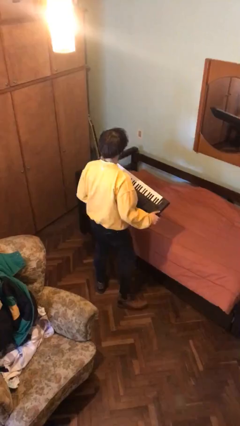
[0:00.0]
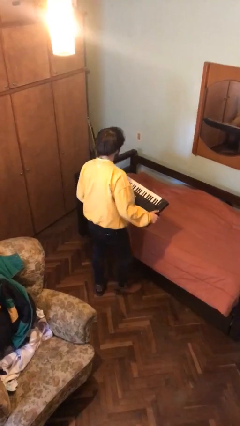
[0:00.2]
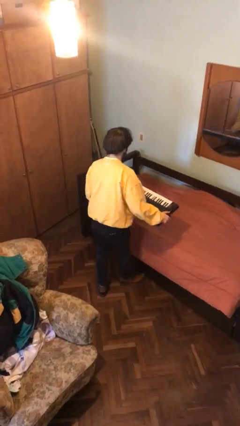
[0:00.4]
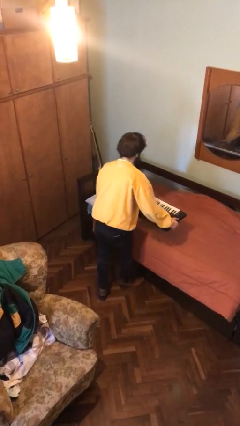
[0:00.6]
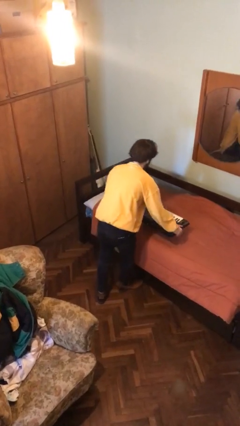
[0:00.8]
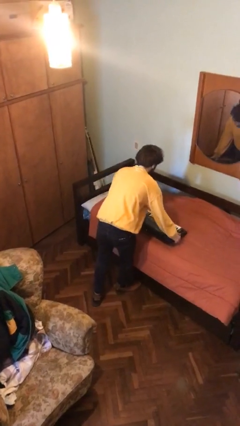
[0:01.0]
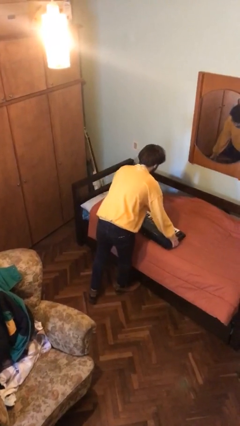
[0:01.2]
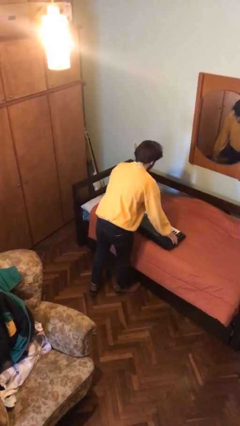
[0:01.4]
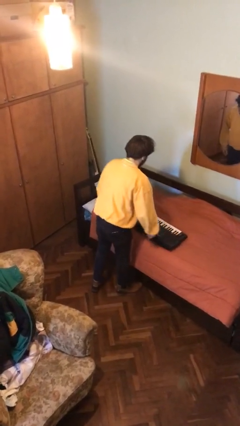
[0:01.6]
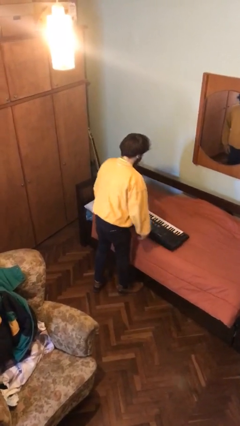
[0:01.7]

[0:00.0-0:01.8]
person puts down object on bed

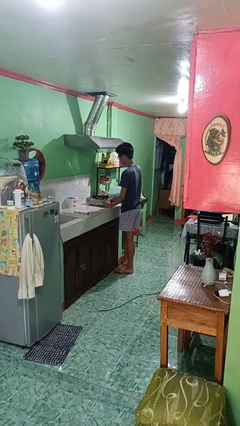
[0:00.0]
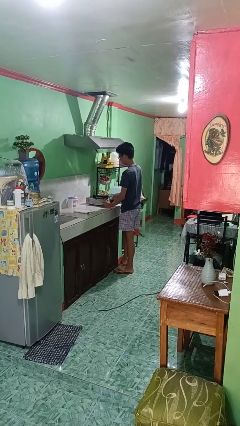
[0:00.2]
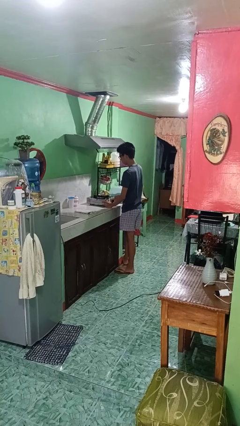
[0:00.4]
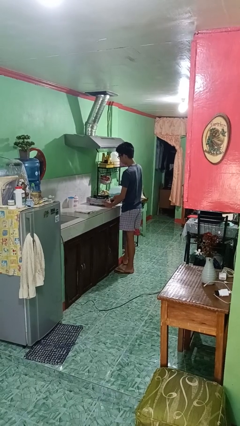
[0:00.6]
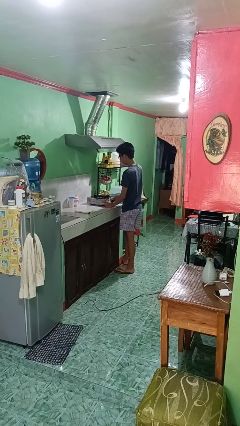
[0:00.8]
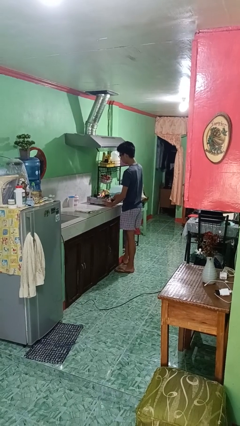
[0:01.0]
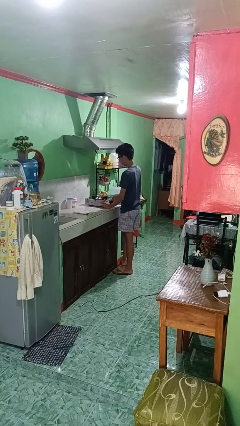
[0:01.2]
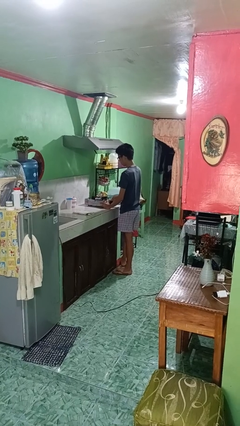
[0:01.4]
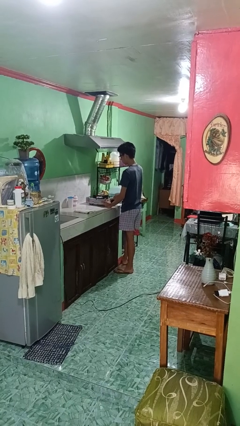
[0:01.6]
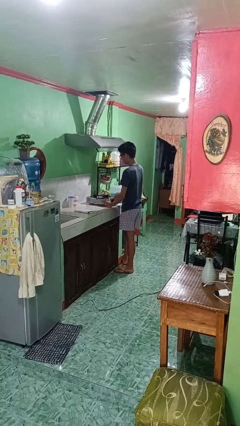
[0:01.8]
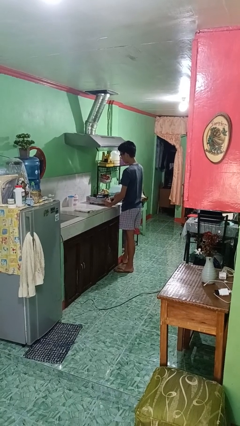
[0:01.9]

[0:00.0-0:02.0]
person turns on stovetop

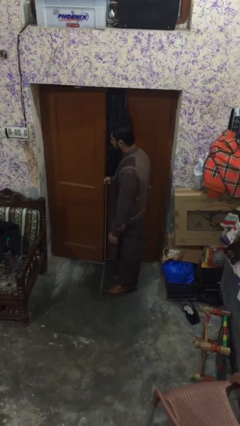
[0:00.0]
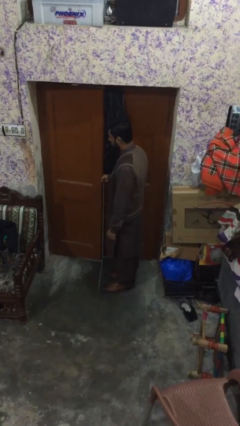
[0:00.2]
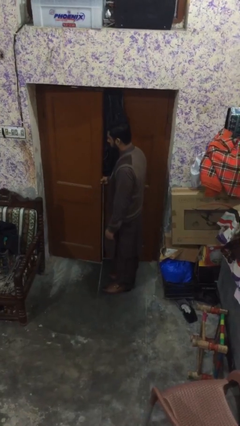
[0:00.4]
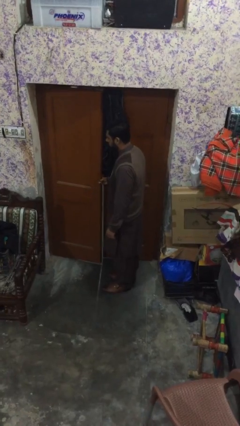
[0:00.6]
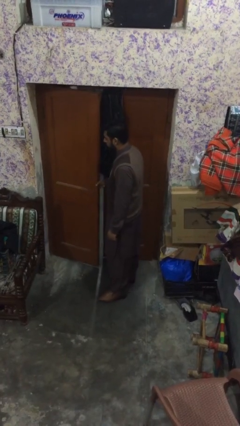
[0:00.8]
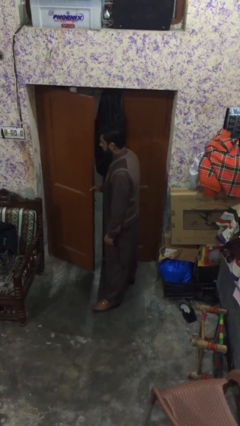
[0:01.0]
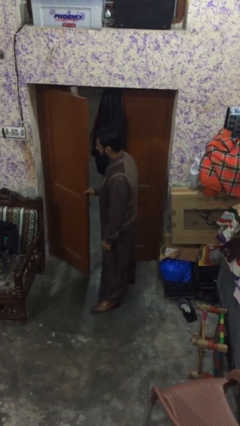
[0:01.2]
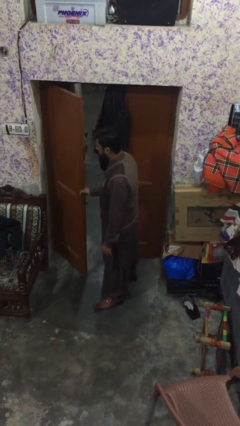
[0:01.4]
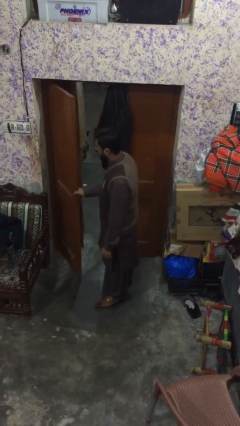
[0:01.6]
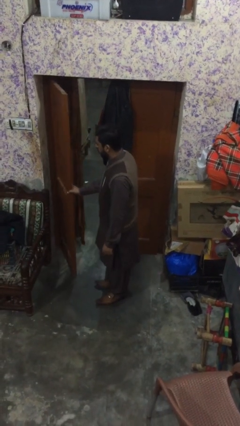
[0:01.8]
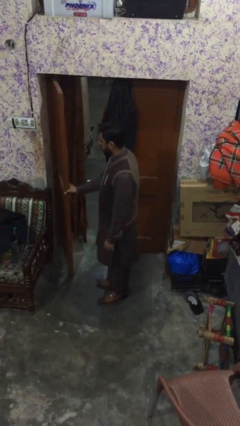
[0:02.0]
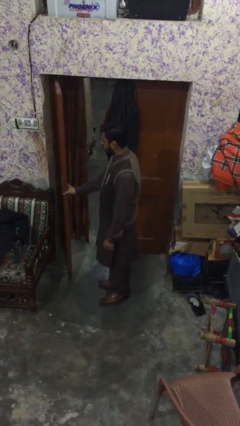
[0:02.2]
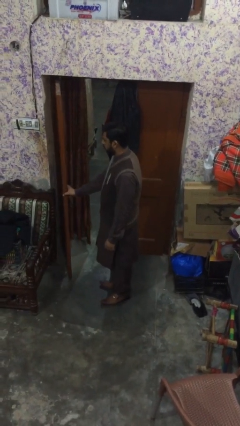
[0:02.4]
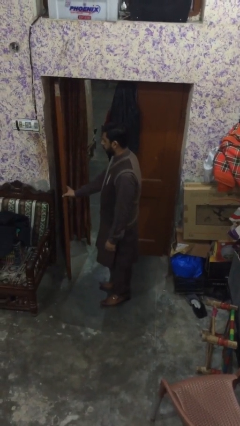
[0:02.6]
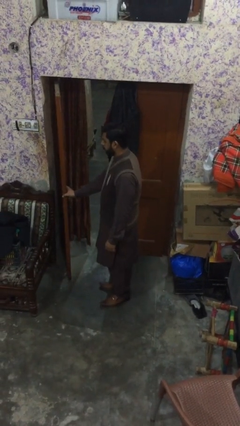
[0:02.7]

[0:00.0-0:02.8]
person opens facility door

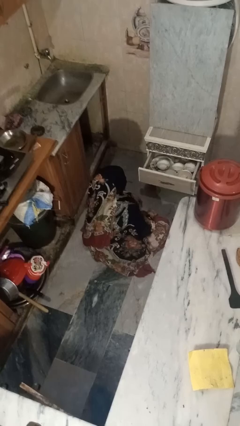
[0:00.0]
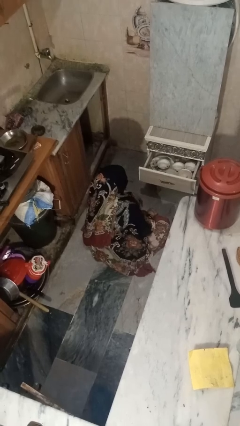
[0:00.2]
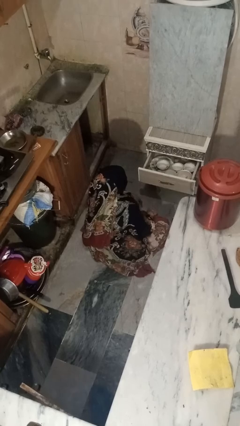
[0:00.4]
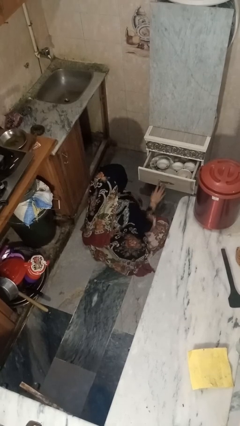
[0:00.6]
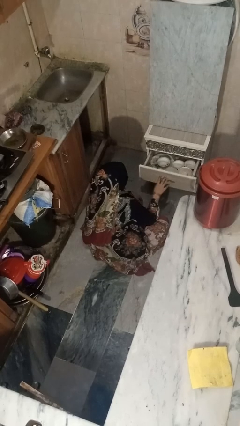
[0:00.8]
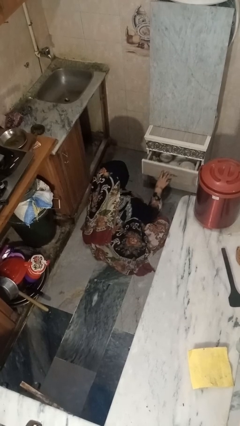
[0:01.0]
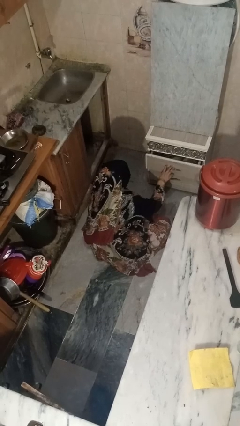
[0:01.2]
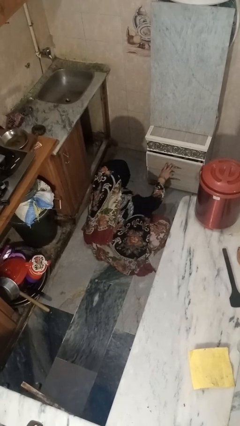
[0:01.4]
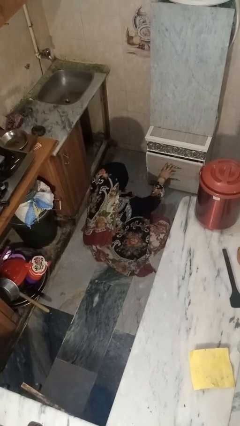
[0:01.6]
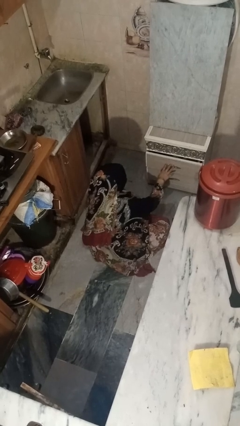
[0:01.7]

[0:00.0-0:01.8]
person closes kitchen drawer

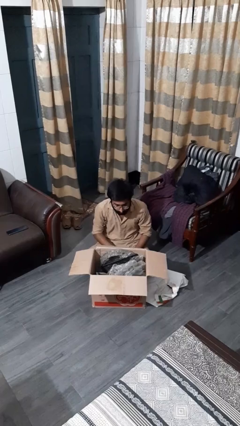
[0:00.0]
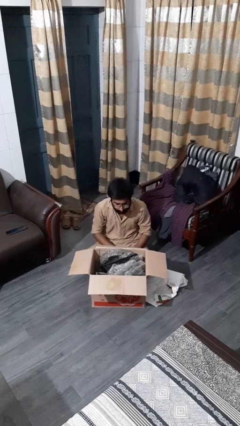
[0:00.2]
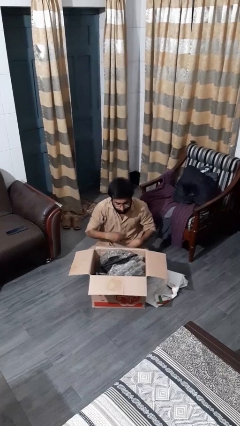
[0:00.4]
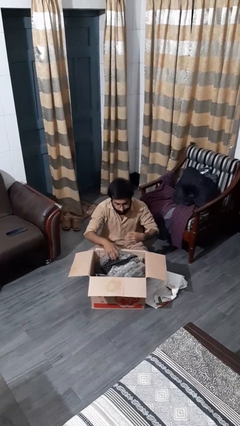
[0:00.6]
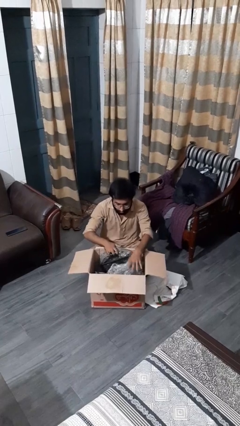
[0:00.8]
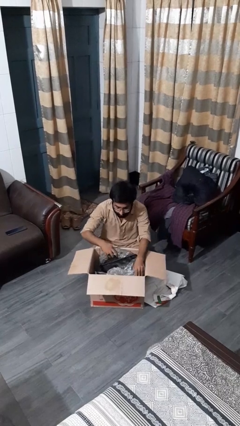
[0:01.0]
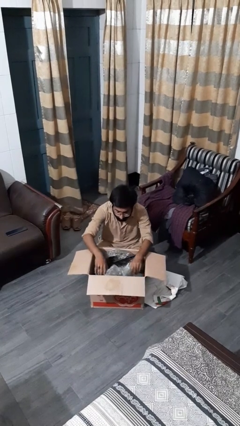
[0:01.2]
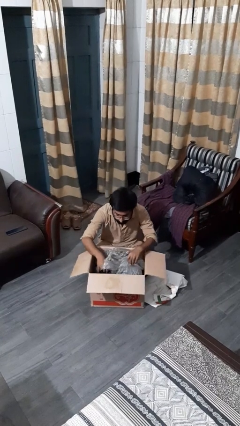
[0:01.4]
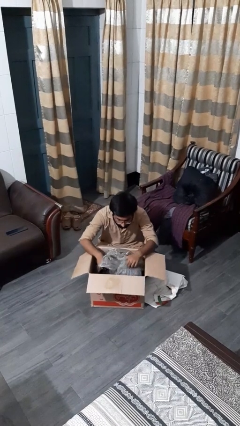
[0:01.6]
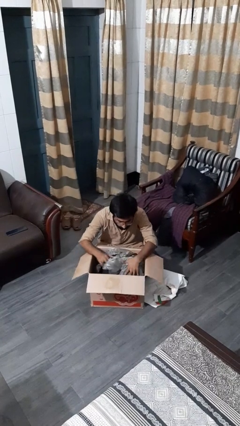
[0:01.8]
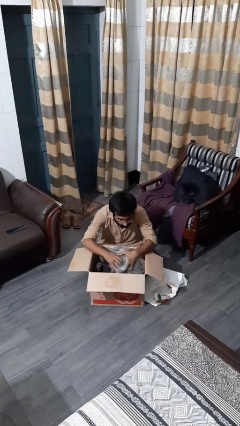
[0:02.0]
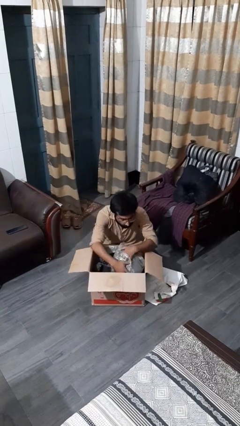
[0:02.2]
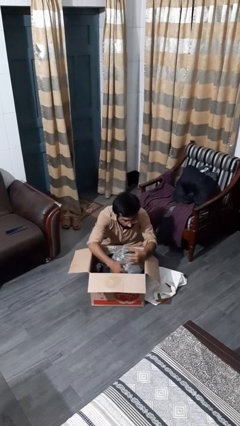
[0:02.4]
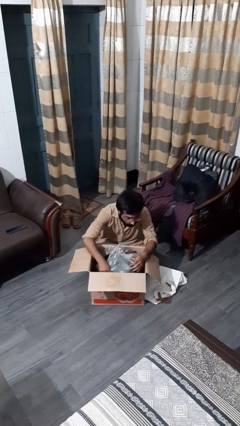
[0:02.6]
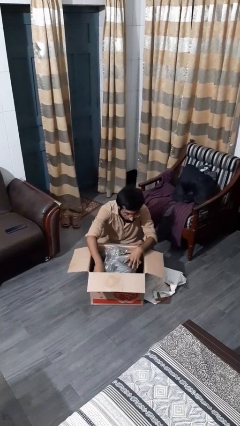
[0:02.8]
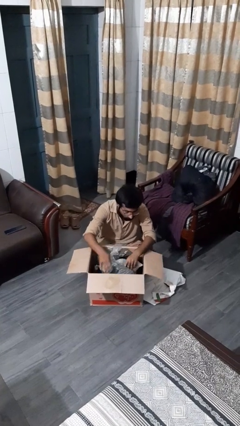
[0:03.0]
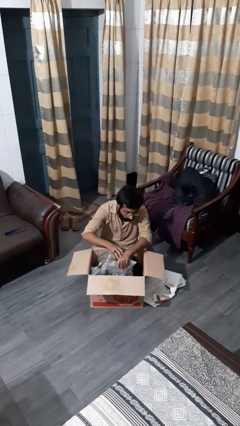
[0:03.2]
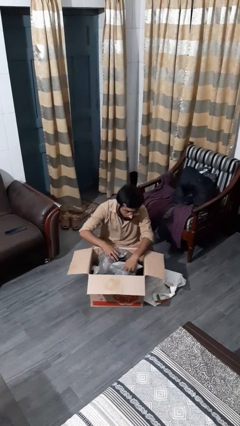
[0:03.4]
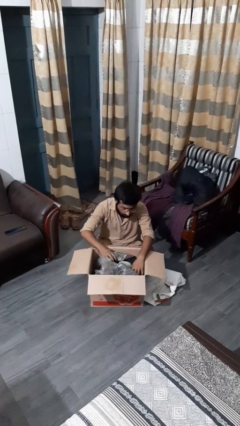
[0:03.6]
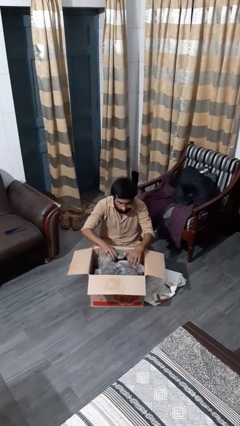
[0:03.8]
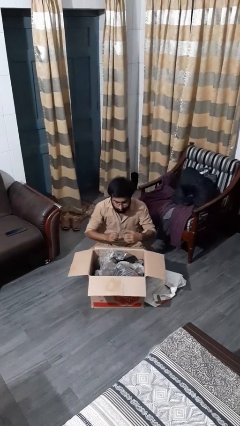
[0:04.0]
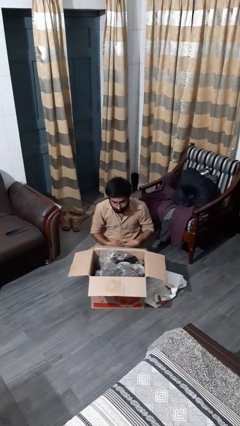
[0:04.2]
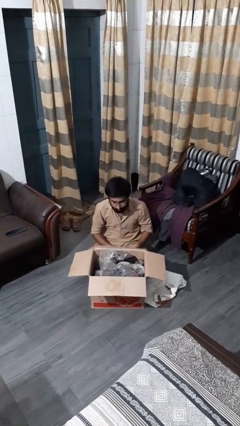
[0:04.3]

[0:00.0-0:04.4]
person searches in box

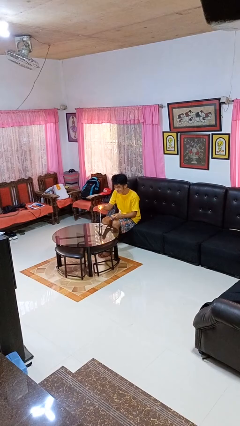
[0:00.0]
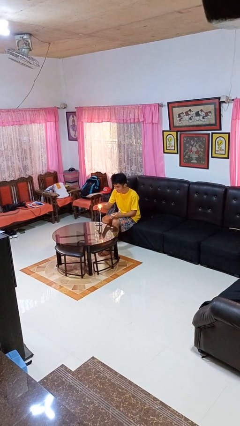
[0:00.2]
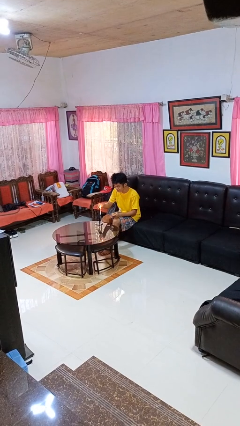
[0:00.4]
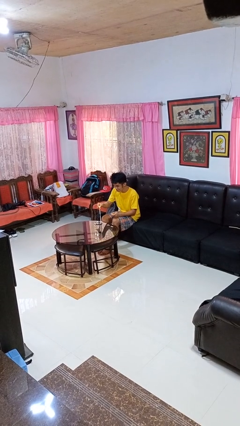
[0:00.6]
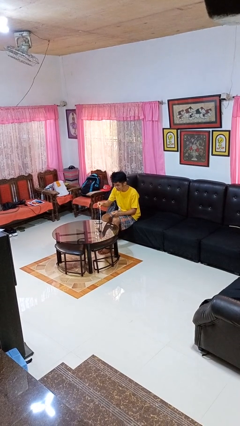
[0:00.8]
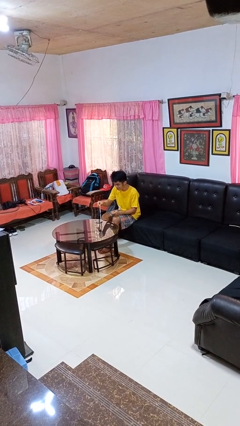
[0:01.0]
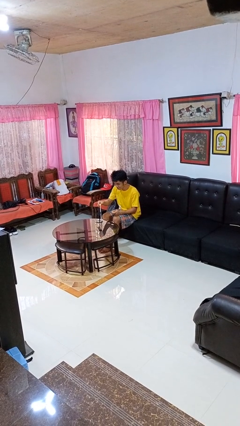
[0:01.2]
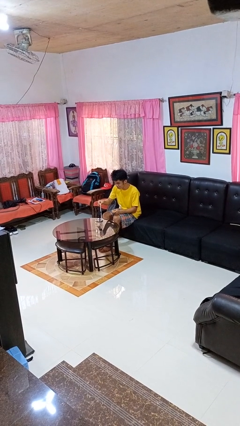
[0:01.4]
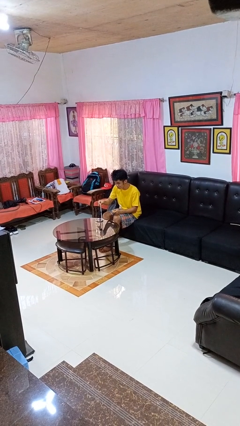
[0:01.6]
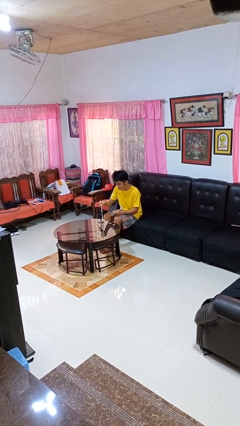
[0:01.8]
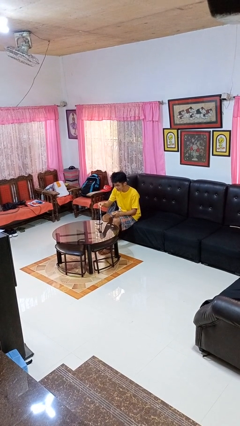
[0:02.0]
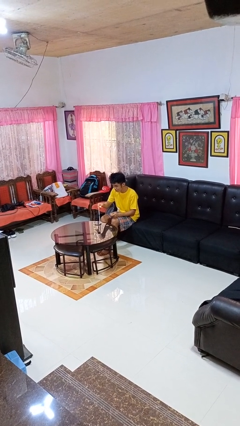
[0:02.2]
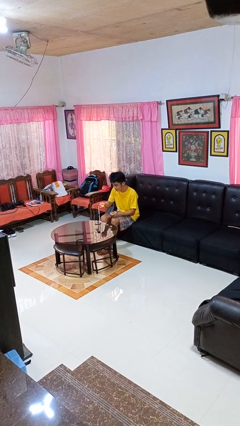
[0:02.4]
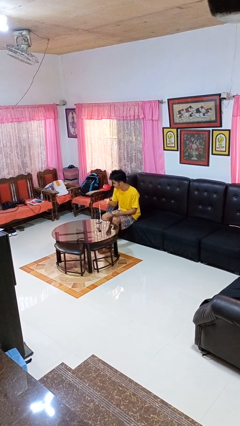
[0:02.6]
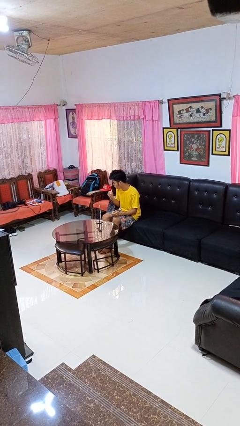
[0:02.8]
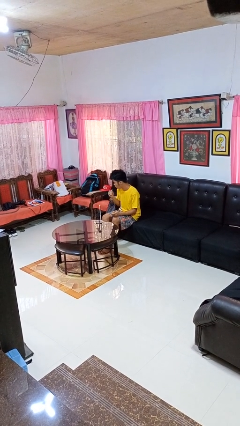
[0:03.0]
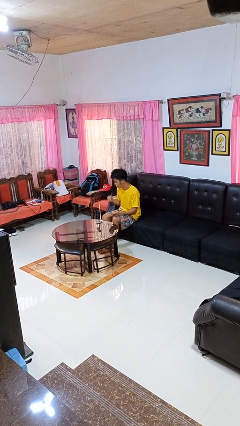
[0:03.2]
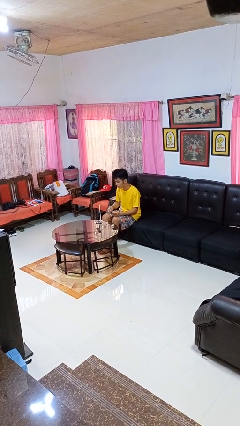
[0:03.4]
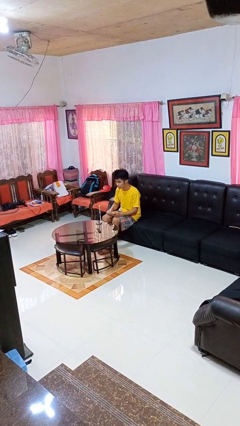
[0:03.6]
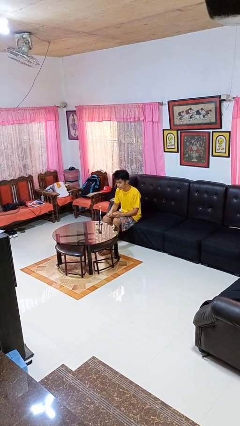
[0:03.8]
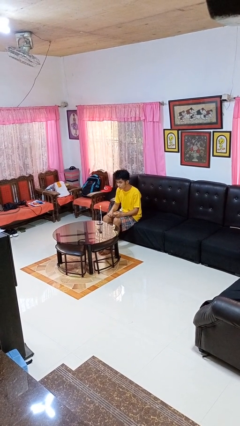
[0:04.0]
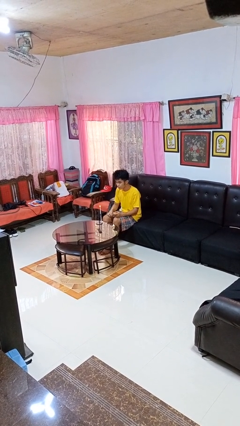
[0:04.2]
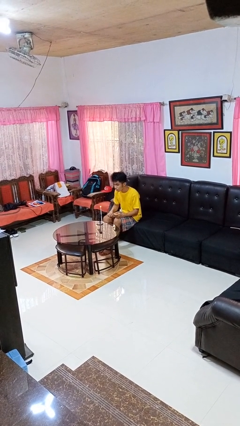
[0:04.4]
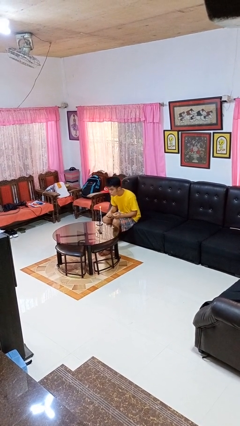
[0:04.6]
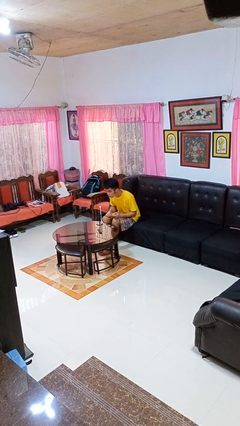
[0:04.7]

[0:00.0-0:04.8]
person lights candle

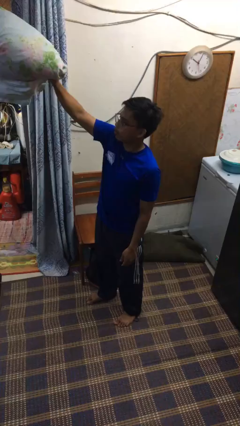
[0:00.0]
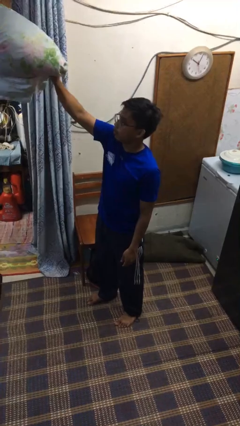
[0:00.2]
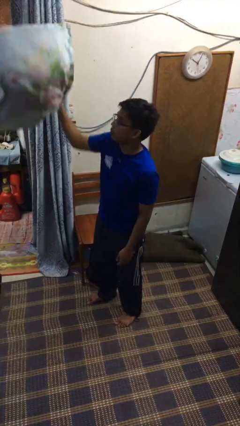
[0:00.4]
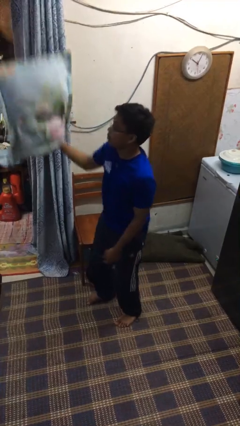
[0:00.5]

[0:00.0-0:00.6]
person drops object
